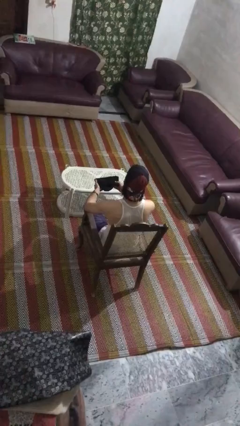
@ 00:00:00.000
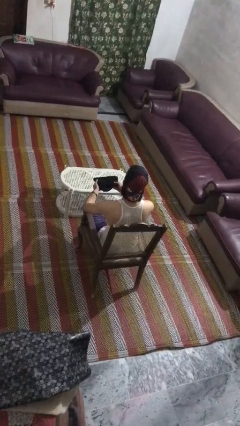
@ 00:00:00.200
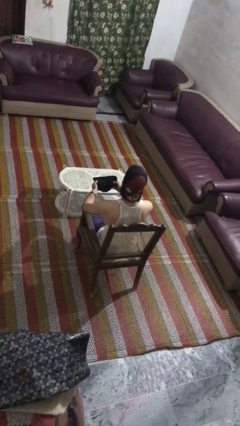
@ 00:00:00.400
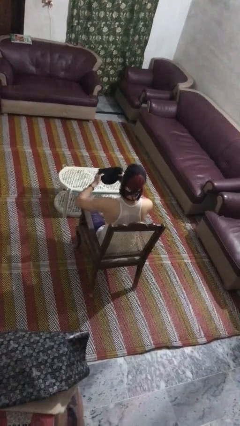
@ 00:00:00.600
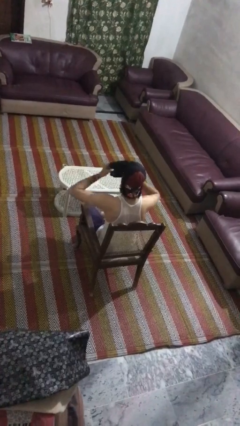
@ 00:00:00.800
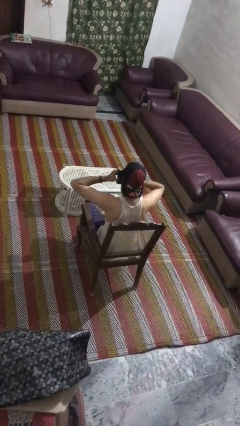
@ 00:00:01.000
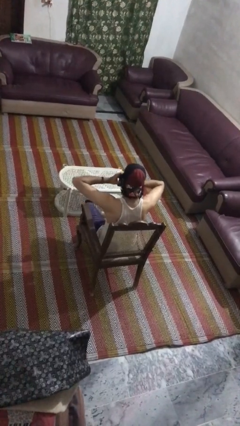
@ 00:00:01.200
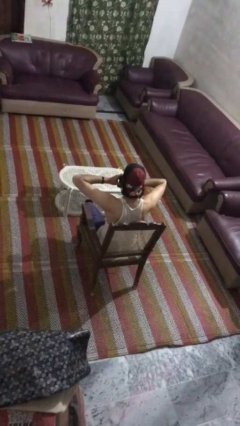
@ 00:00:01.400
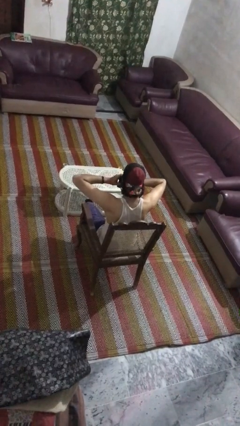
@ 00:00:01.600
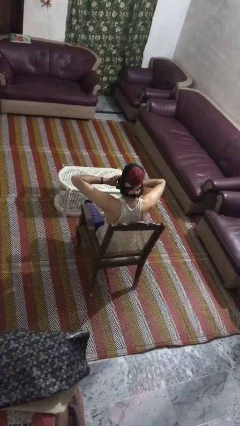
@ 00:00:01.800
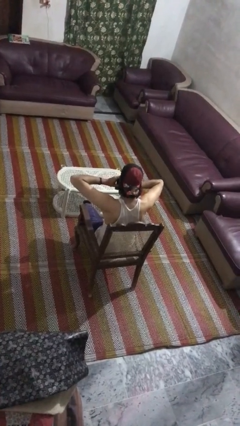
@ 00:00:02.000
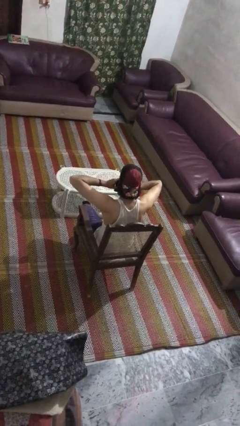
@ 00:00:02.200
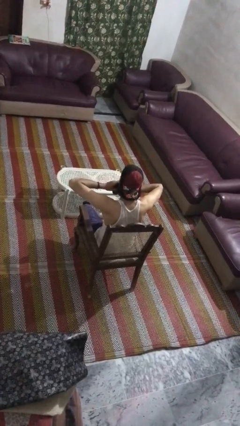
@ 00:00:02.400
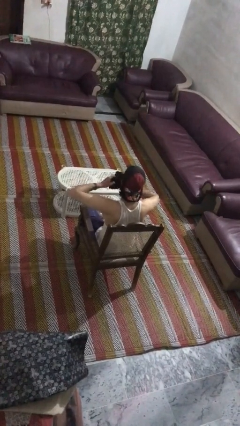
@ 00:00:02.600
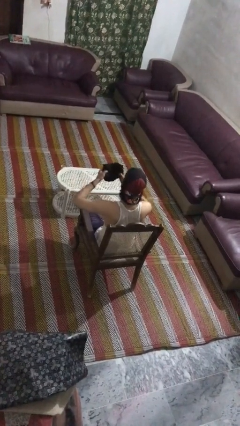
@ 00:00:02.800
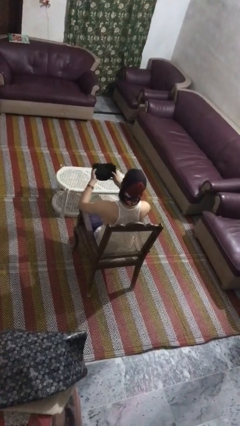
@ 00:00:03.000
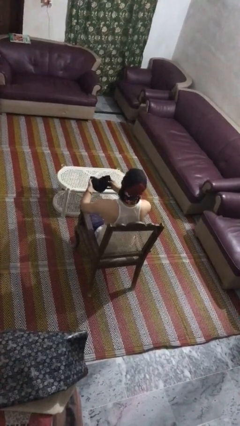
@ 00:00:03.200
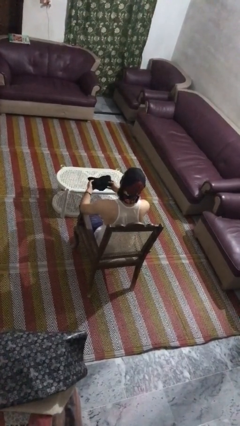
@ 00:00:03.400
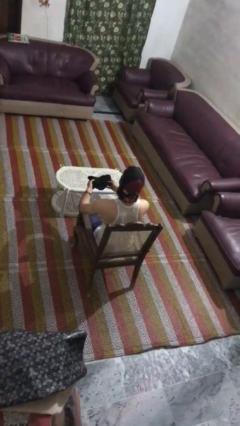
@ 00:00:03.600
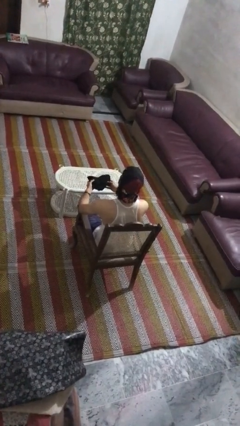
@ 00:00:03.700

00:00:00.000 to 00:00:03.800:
person blows nose

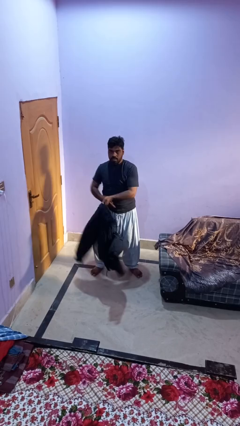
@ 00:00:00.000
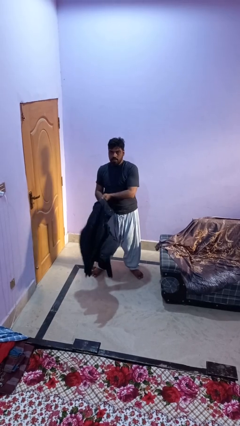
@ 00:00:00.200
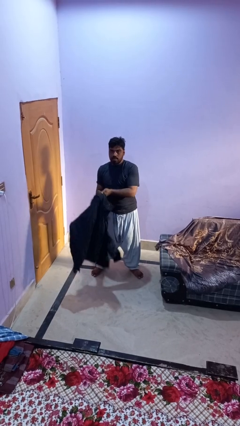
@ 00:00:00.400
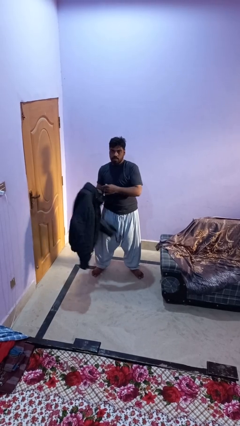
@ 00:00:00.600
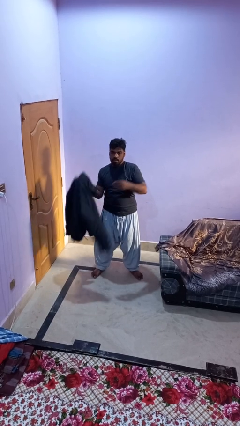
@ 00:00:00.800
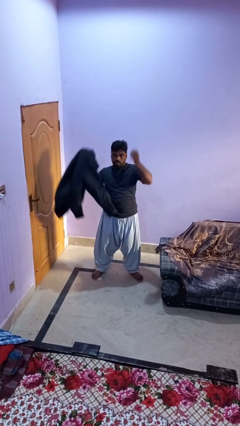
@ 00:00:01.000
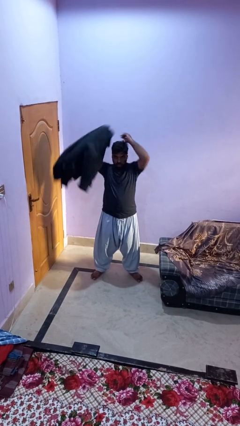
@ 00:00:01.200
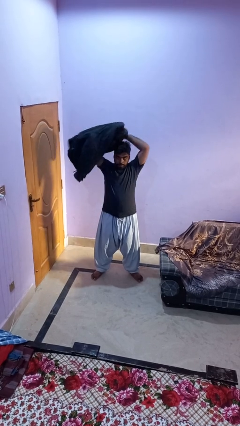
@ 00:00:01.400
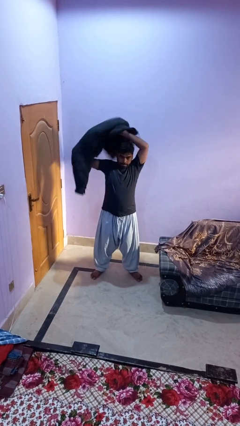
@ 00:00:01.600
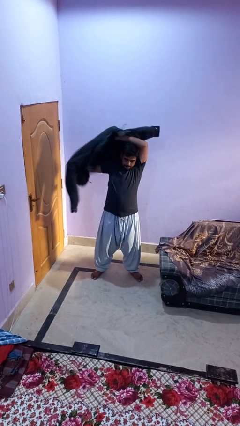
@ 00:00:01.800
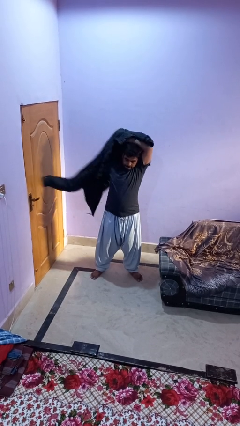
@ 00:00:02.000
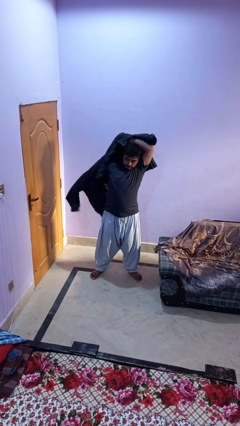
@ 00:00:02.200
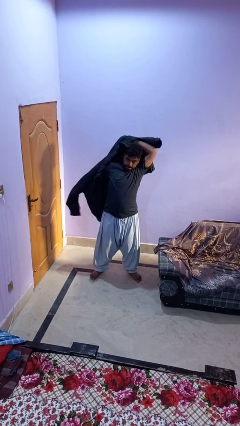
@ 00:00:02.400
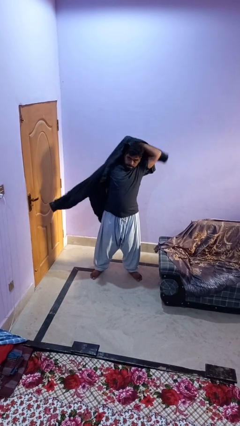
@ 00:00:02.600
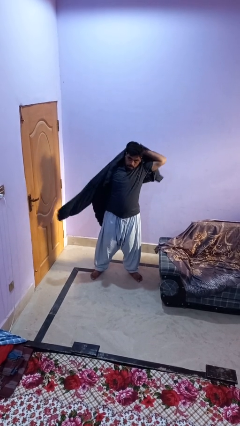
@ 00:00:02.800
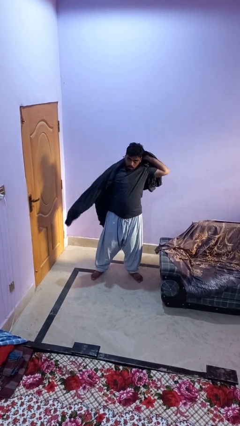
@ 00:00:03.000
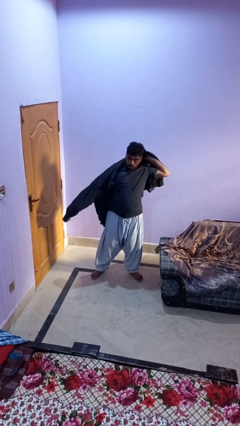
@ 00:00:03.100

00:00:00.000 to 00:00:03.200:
person puts on jacket

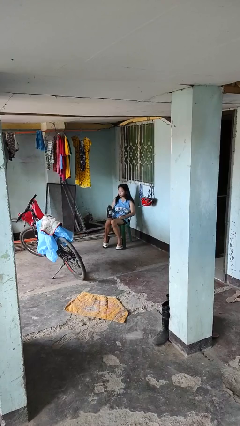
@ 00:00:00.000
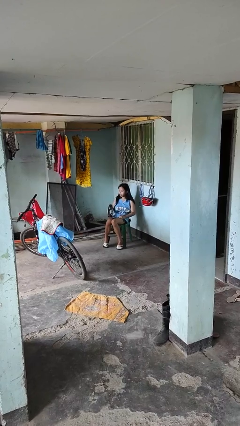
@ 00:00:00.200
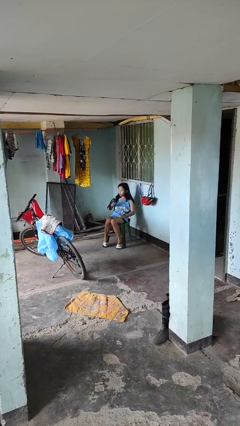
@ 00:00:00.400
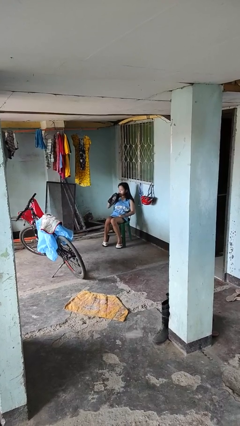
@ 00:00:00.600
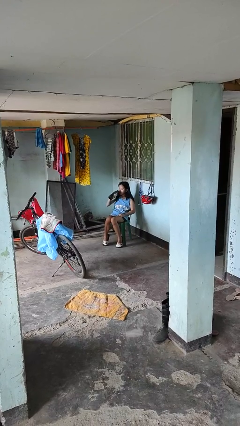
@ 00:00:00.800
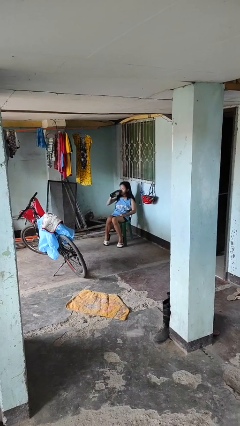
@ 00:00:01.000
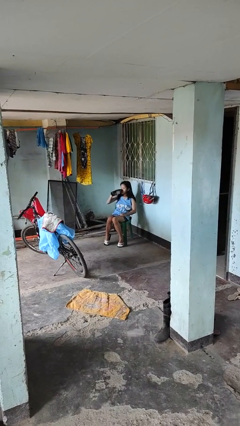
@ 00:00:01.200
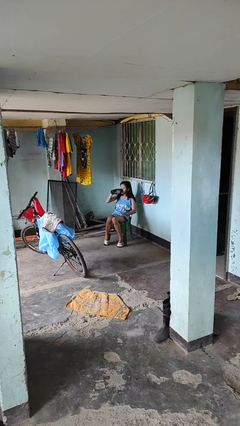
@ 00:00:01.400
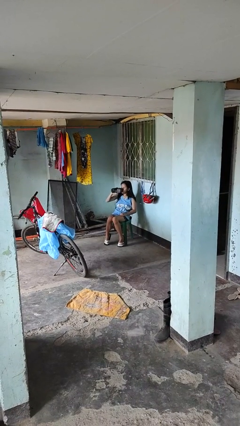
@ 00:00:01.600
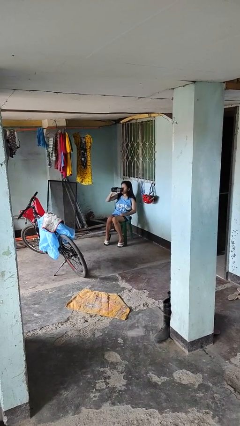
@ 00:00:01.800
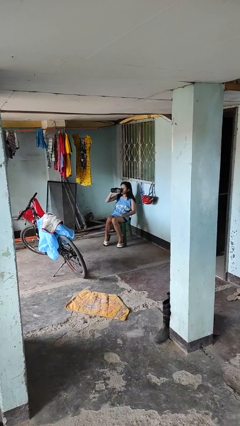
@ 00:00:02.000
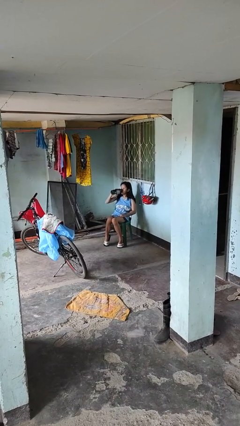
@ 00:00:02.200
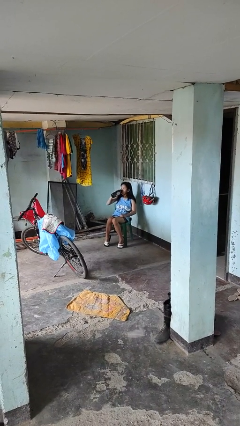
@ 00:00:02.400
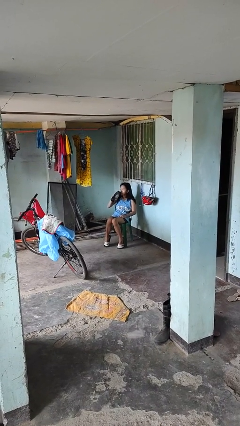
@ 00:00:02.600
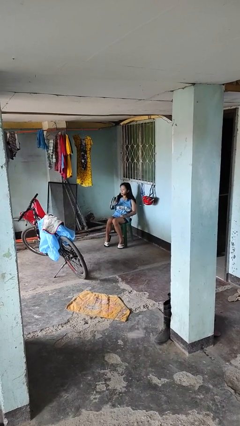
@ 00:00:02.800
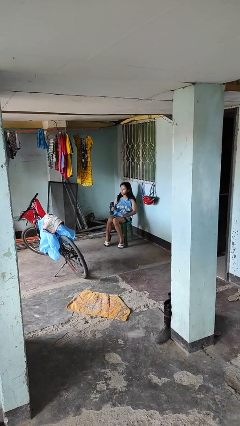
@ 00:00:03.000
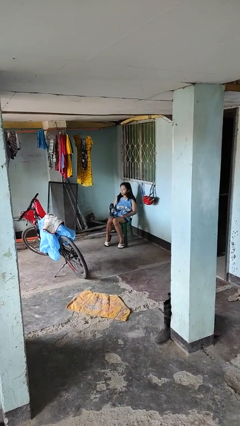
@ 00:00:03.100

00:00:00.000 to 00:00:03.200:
person drinks from bottle

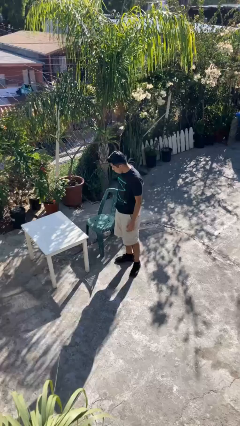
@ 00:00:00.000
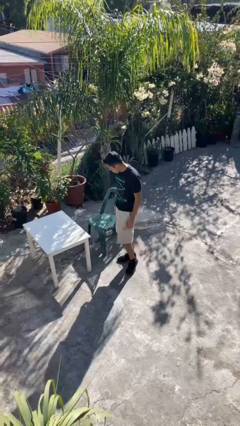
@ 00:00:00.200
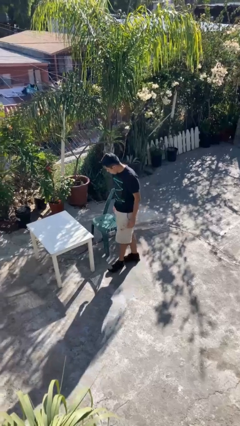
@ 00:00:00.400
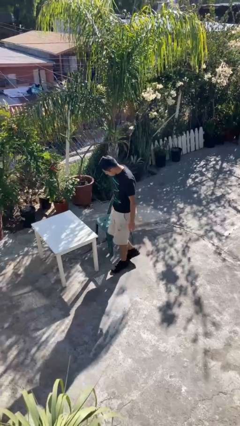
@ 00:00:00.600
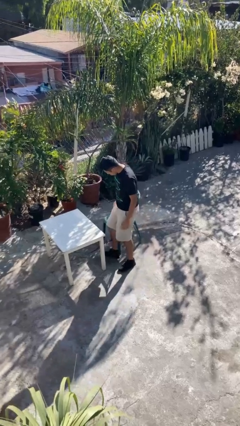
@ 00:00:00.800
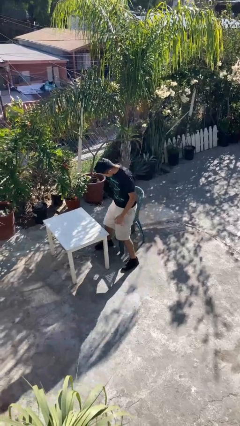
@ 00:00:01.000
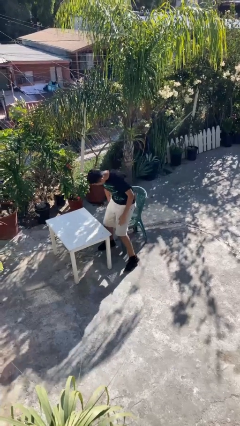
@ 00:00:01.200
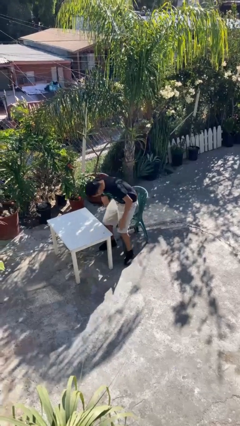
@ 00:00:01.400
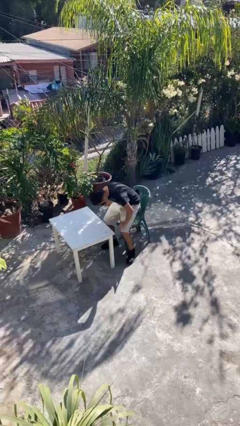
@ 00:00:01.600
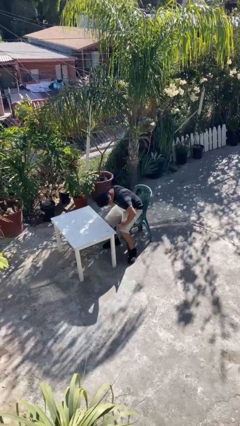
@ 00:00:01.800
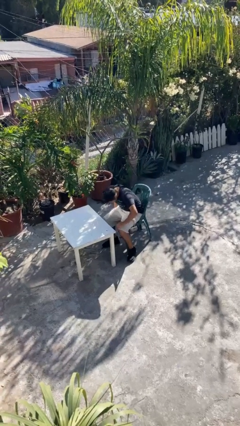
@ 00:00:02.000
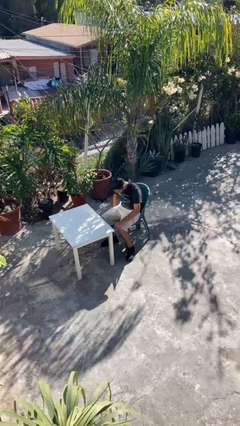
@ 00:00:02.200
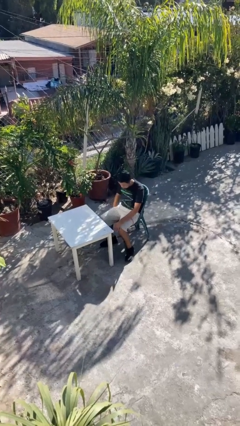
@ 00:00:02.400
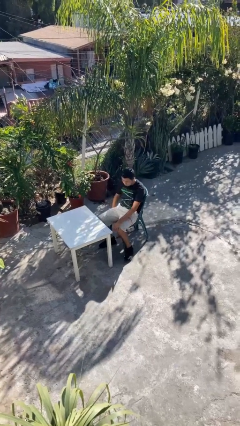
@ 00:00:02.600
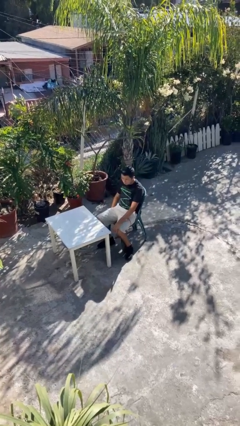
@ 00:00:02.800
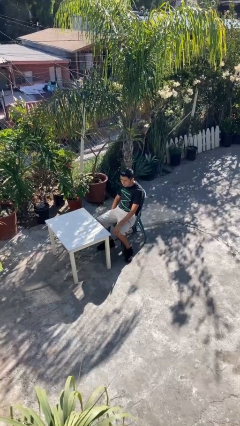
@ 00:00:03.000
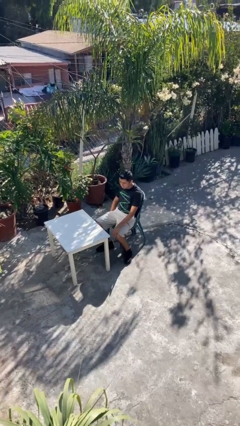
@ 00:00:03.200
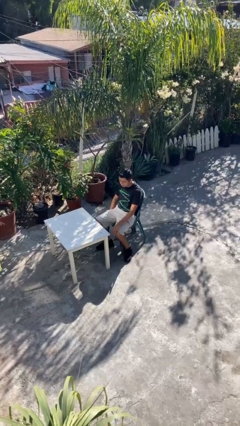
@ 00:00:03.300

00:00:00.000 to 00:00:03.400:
person sits down

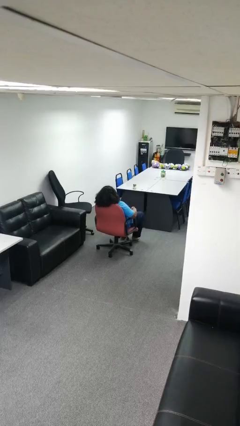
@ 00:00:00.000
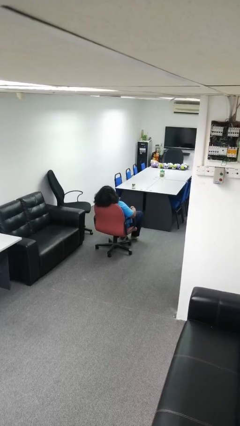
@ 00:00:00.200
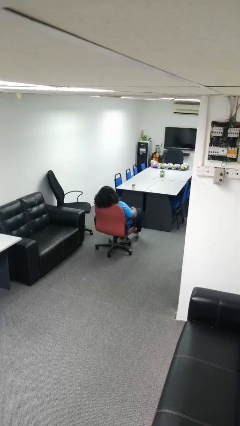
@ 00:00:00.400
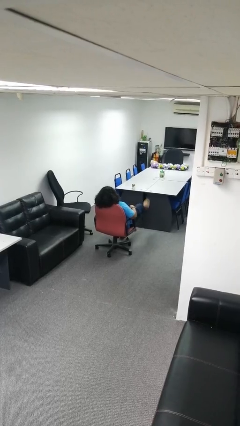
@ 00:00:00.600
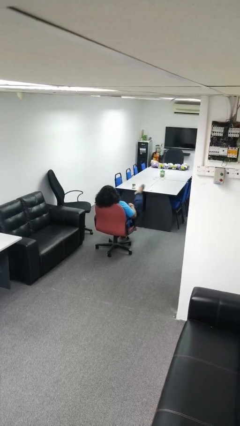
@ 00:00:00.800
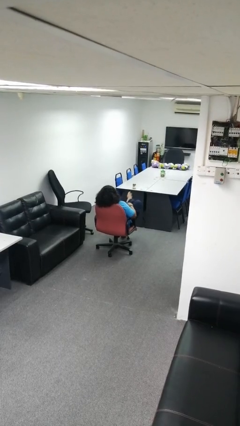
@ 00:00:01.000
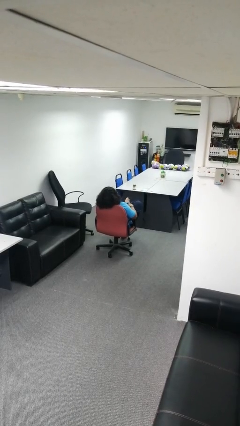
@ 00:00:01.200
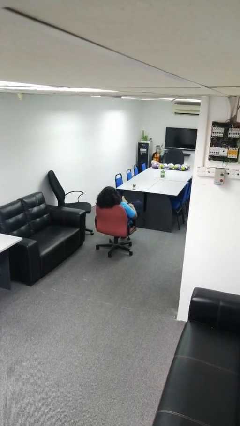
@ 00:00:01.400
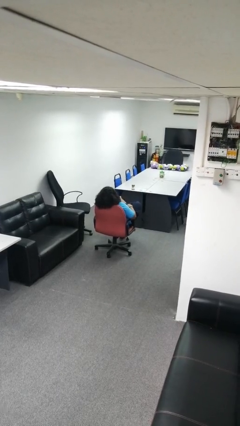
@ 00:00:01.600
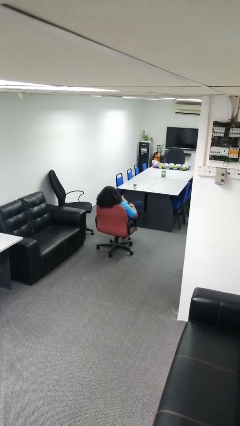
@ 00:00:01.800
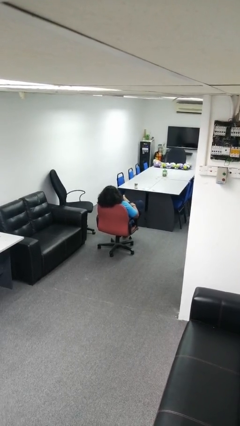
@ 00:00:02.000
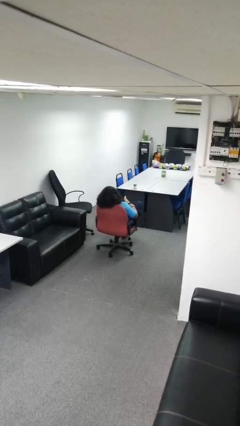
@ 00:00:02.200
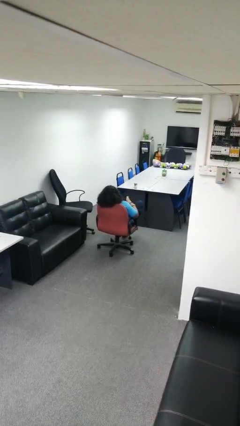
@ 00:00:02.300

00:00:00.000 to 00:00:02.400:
person crosses legs

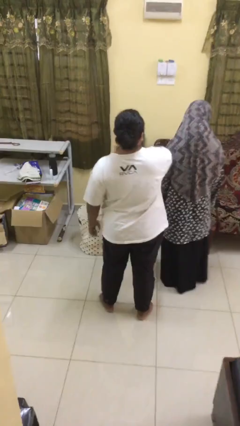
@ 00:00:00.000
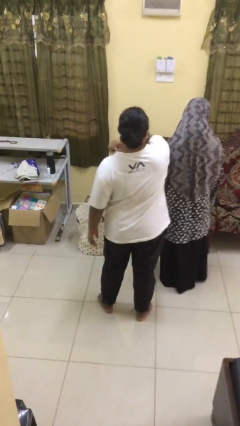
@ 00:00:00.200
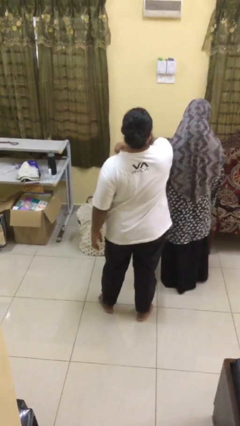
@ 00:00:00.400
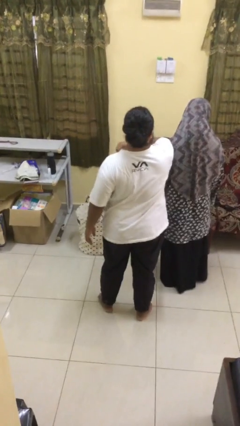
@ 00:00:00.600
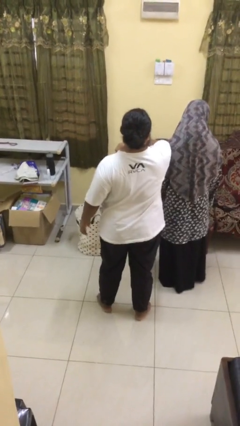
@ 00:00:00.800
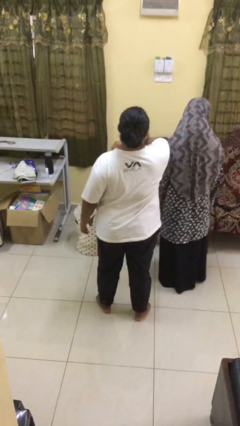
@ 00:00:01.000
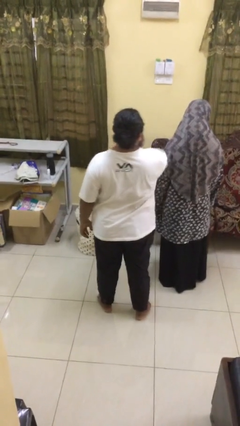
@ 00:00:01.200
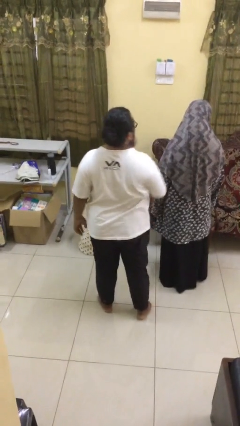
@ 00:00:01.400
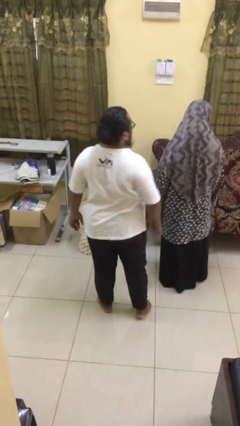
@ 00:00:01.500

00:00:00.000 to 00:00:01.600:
person nudges person with elbow
